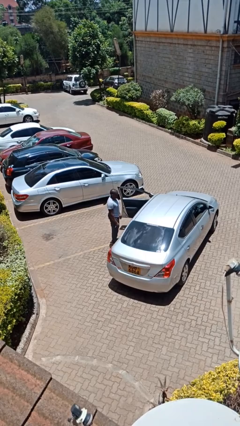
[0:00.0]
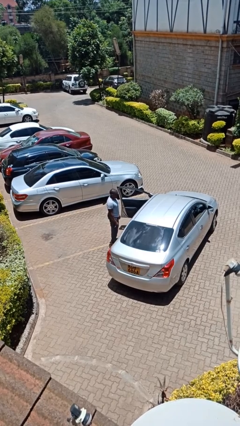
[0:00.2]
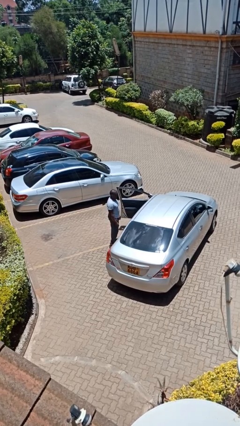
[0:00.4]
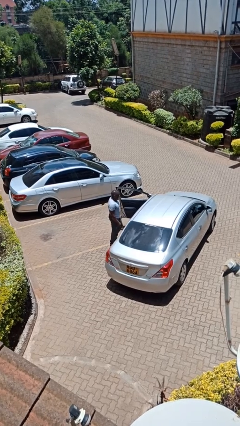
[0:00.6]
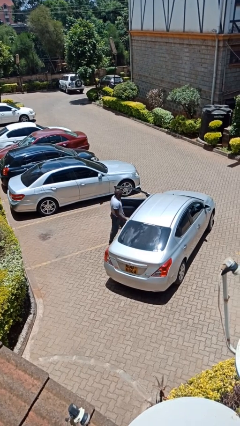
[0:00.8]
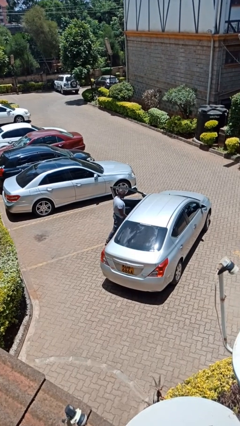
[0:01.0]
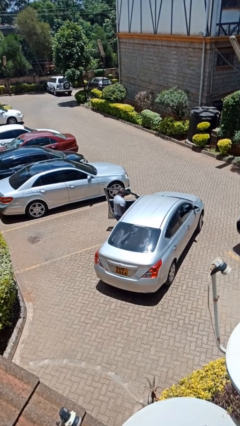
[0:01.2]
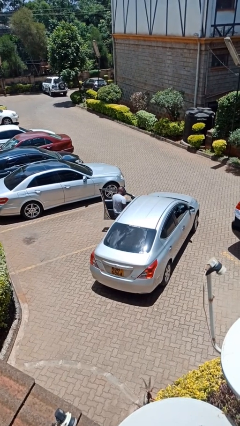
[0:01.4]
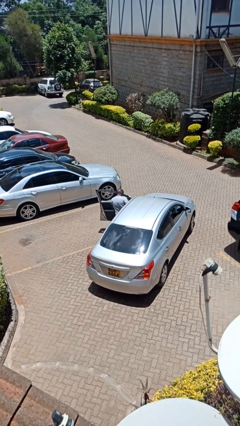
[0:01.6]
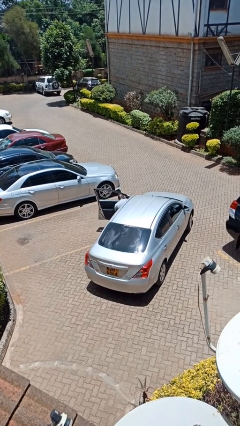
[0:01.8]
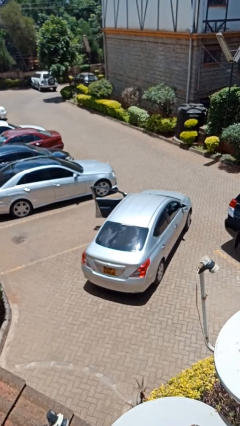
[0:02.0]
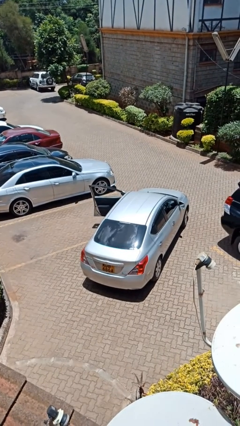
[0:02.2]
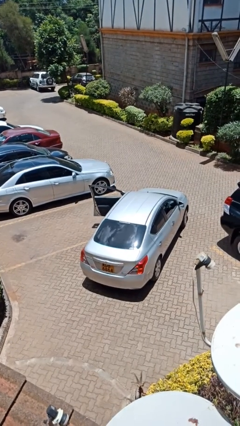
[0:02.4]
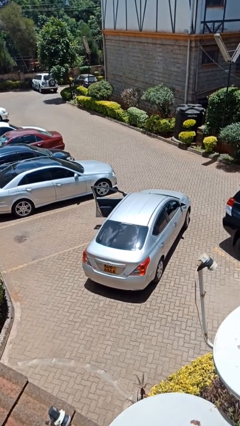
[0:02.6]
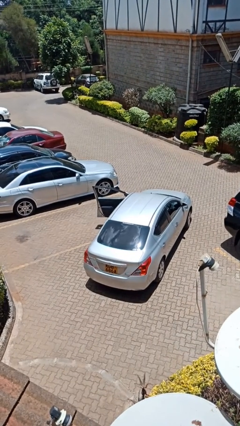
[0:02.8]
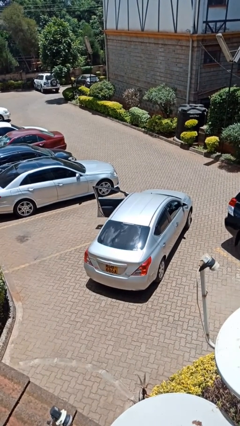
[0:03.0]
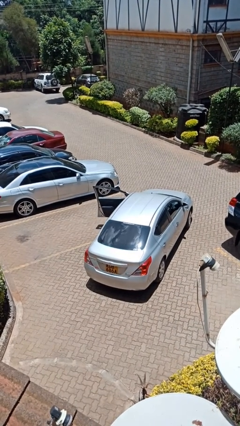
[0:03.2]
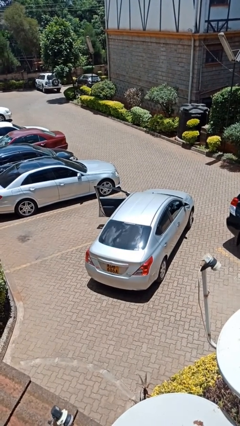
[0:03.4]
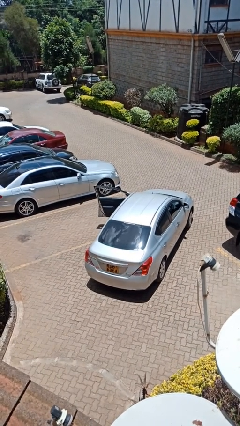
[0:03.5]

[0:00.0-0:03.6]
person enters car

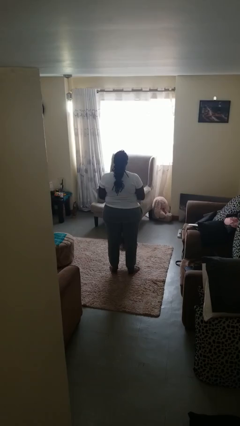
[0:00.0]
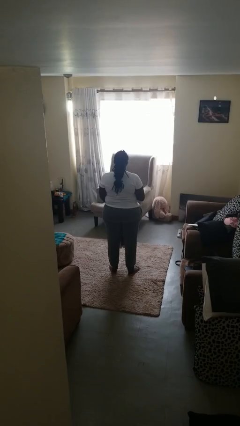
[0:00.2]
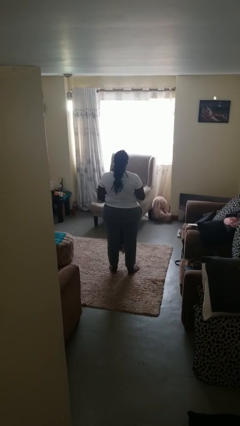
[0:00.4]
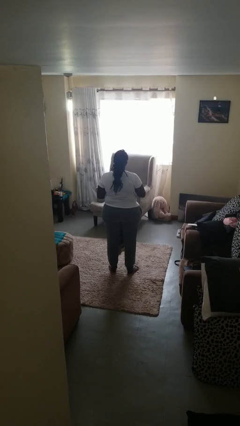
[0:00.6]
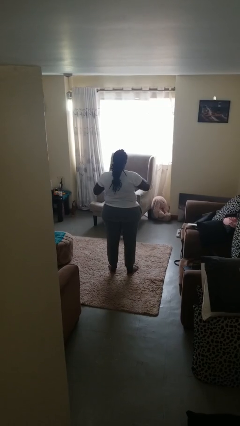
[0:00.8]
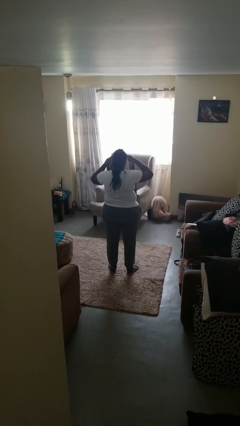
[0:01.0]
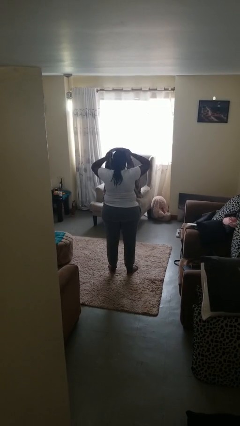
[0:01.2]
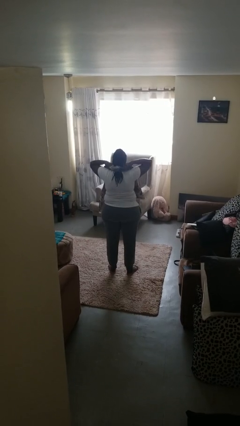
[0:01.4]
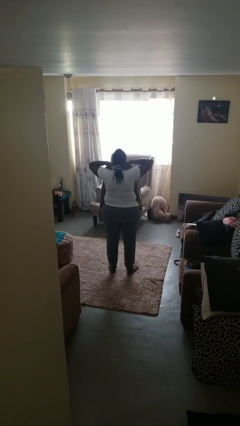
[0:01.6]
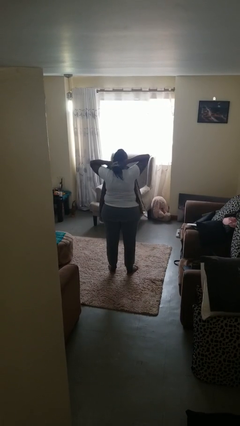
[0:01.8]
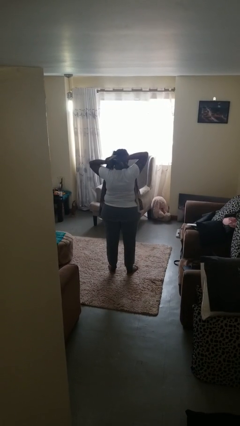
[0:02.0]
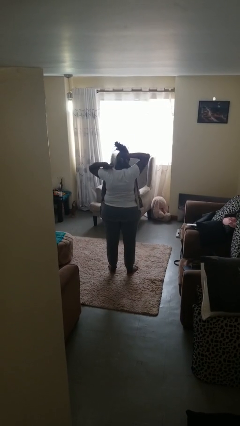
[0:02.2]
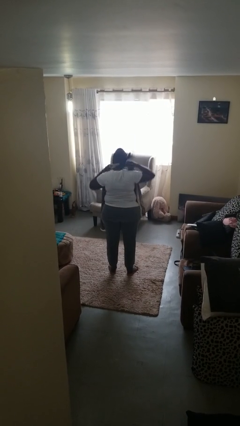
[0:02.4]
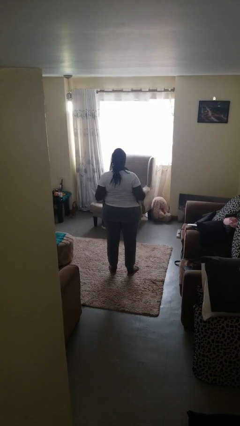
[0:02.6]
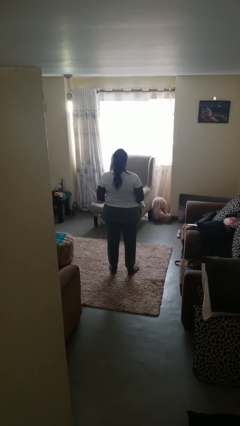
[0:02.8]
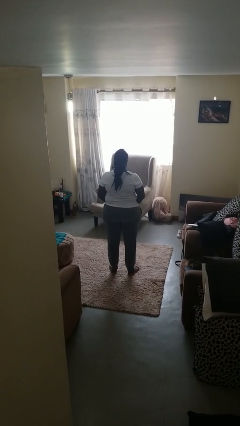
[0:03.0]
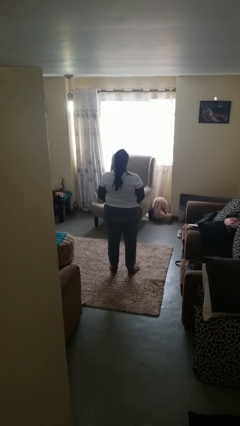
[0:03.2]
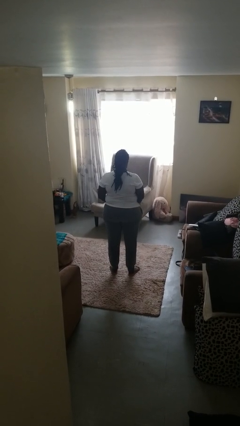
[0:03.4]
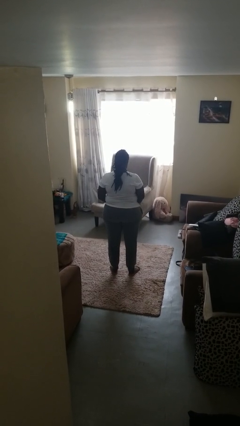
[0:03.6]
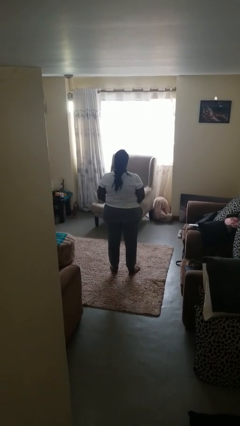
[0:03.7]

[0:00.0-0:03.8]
person puts on scarf

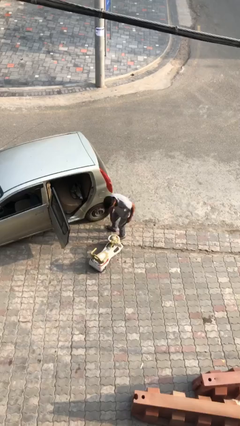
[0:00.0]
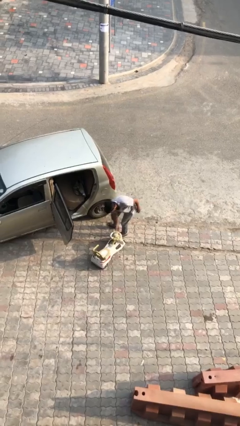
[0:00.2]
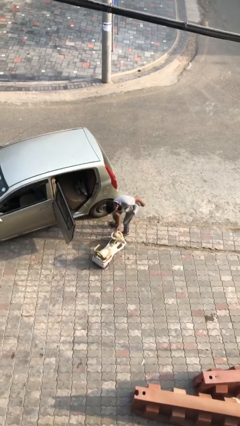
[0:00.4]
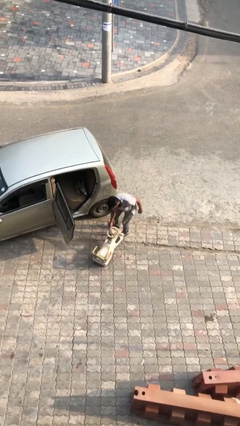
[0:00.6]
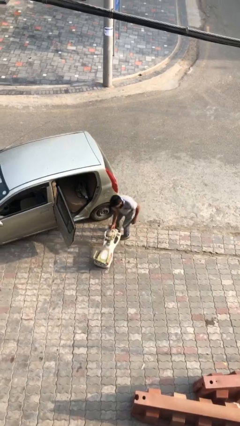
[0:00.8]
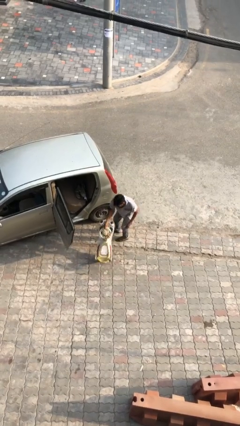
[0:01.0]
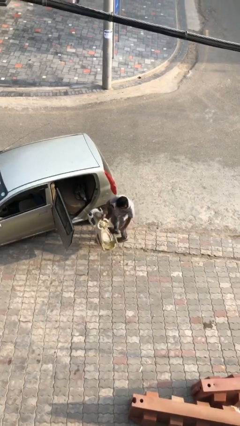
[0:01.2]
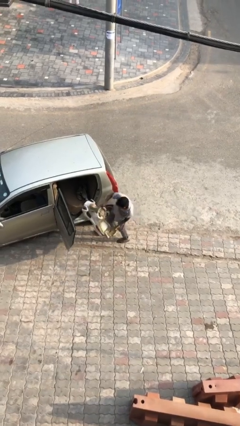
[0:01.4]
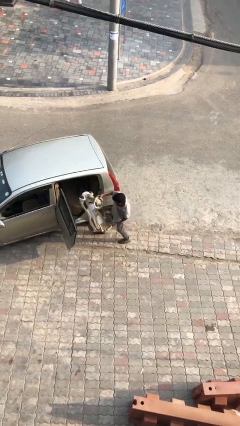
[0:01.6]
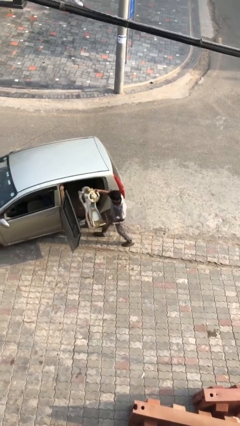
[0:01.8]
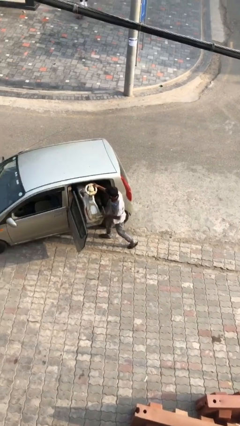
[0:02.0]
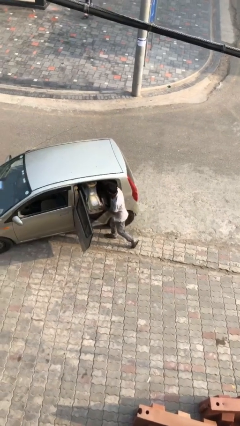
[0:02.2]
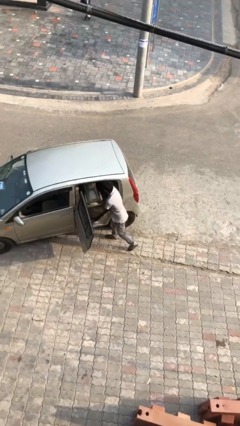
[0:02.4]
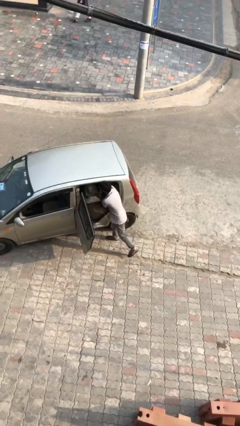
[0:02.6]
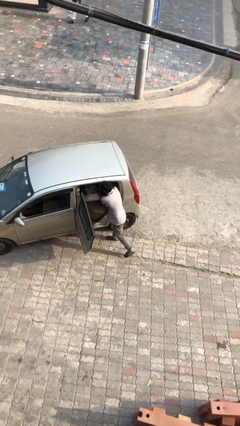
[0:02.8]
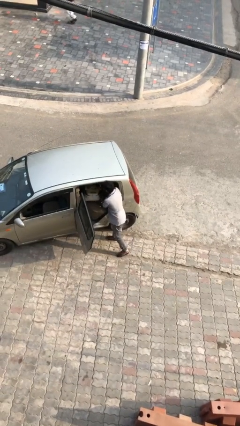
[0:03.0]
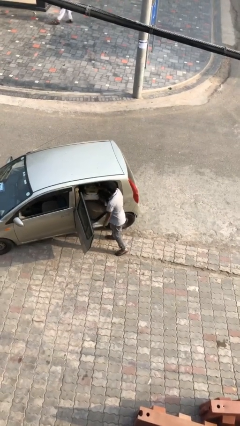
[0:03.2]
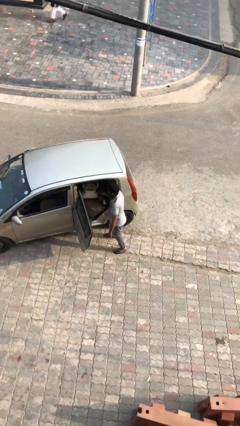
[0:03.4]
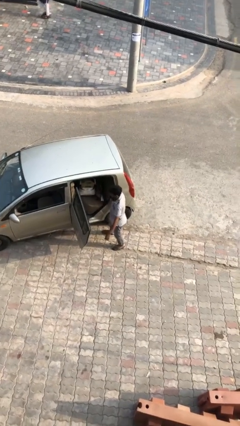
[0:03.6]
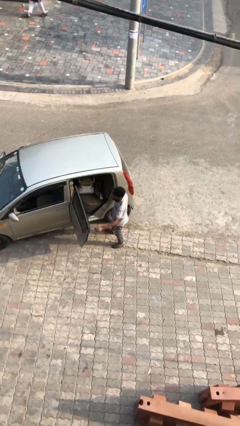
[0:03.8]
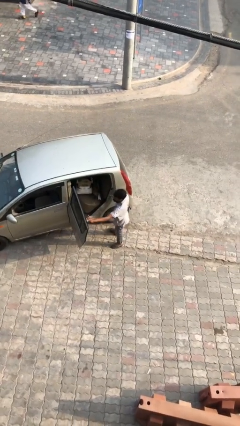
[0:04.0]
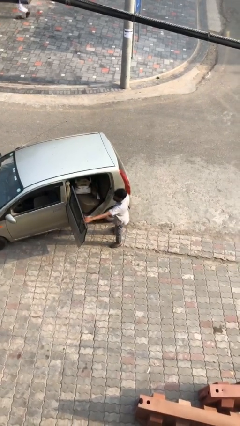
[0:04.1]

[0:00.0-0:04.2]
person loads car

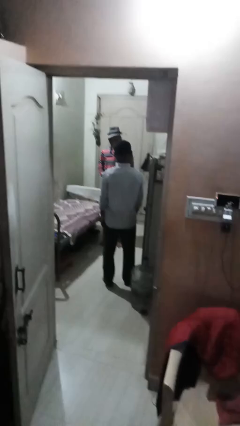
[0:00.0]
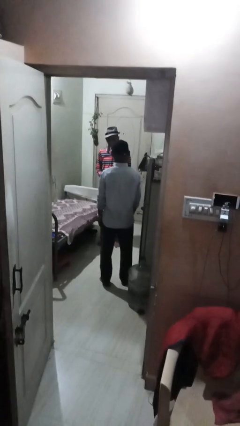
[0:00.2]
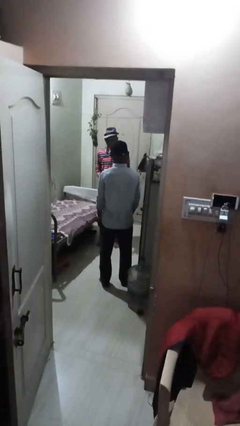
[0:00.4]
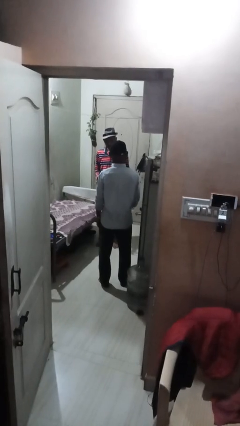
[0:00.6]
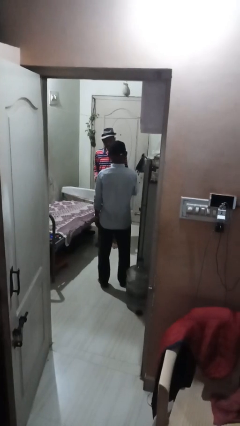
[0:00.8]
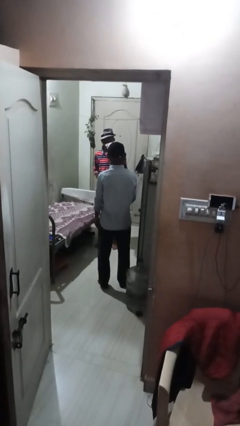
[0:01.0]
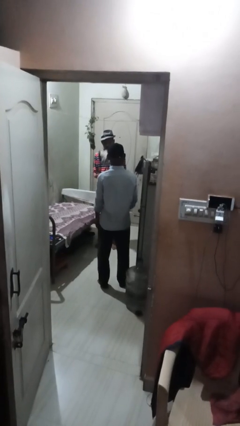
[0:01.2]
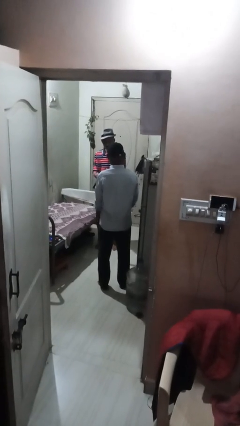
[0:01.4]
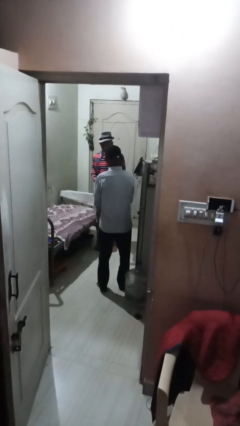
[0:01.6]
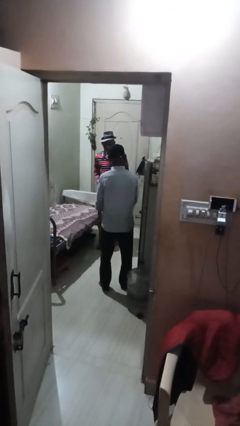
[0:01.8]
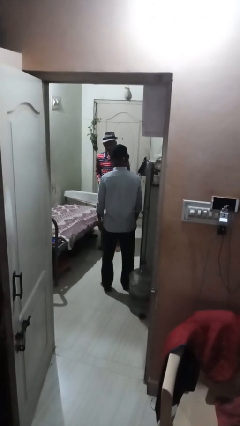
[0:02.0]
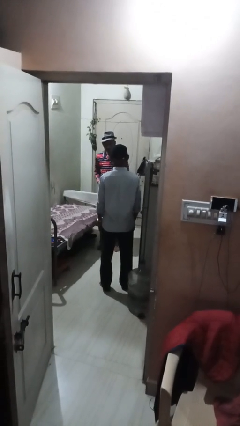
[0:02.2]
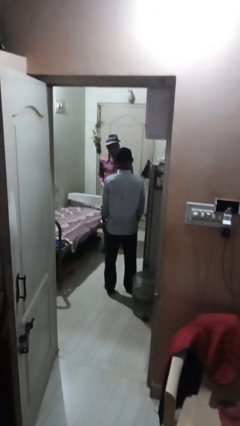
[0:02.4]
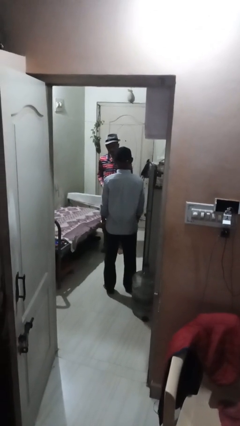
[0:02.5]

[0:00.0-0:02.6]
person throws object to person

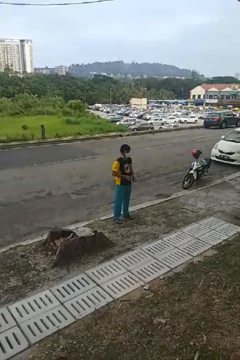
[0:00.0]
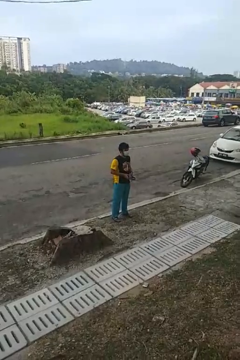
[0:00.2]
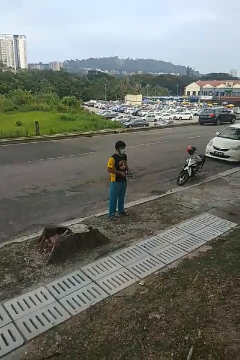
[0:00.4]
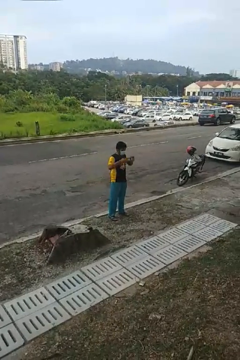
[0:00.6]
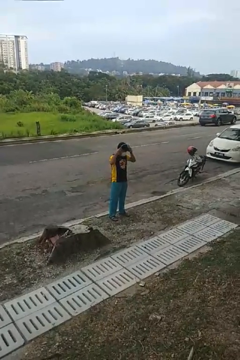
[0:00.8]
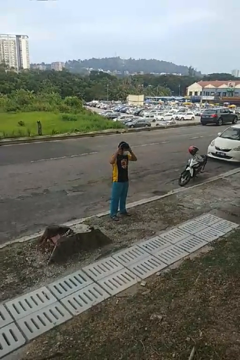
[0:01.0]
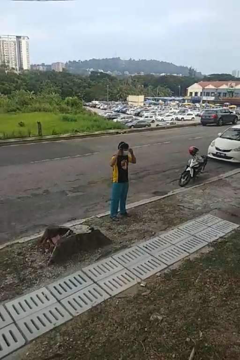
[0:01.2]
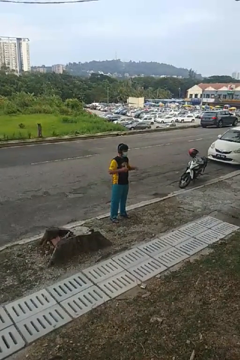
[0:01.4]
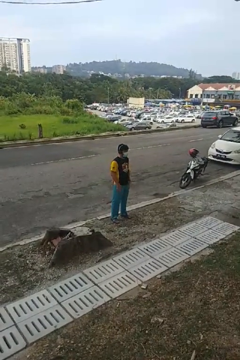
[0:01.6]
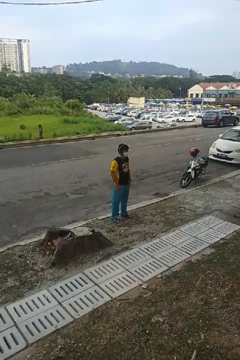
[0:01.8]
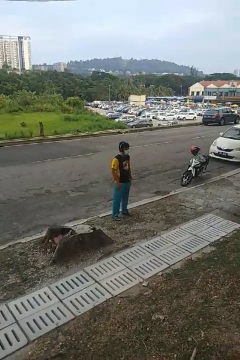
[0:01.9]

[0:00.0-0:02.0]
person puts on headphones

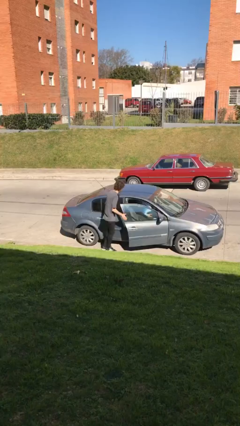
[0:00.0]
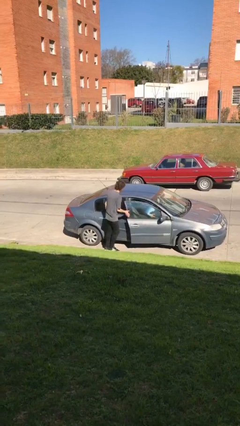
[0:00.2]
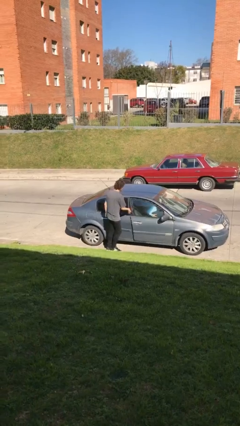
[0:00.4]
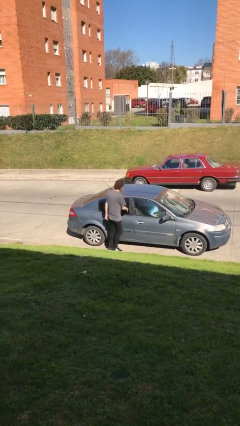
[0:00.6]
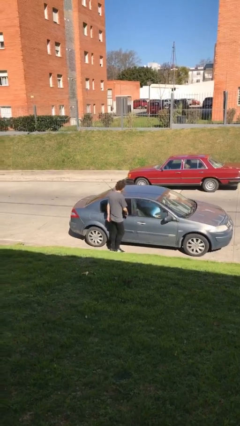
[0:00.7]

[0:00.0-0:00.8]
person closes car door

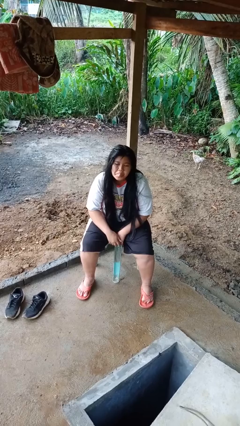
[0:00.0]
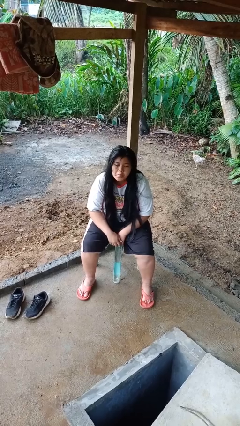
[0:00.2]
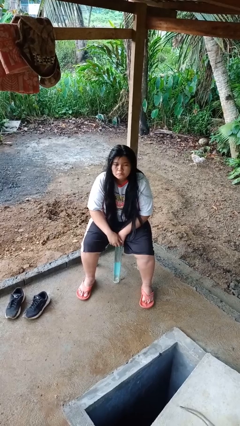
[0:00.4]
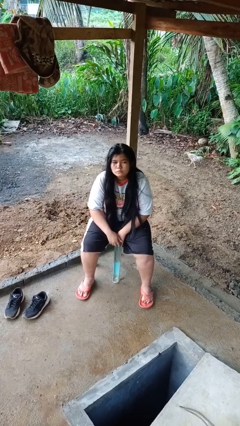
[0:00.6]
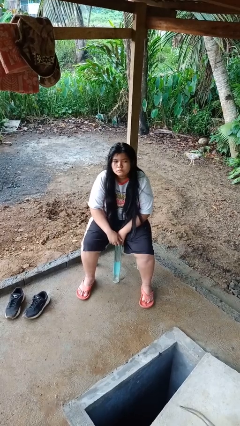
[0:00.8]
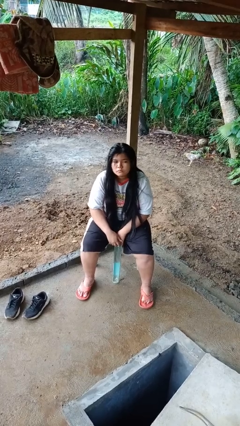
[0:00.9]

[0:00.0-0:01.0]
person sticks out tongue
